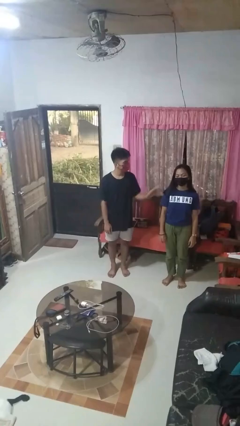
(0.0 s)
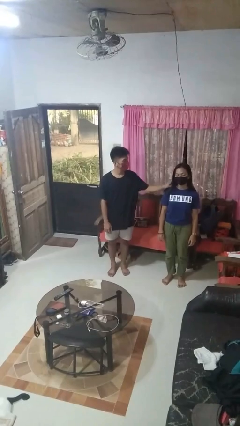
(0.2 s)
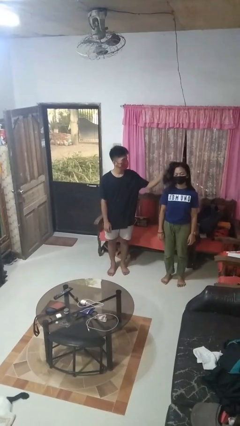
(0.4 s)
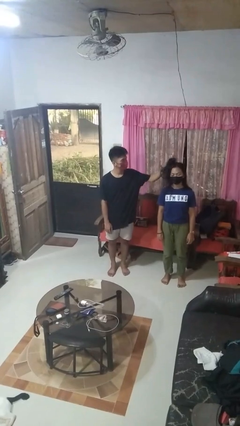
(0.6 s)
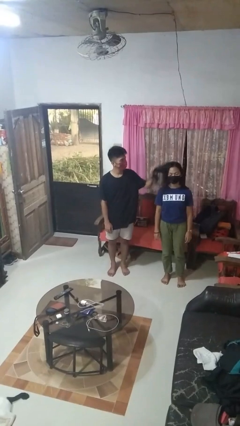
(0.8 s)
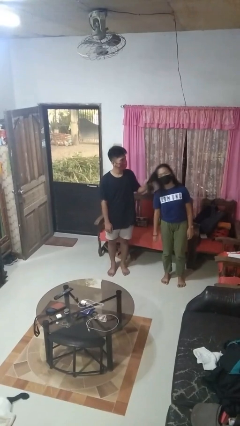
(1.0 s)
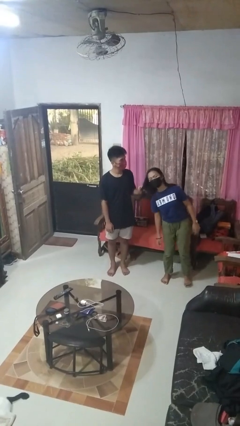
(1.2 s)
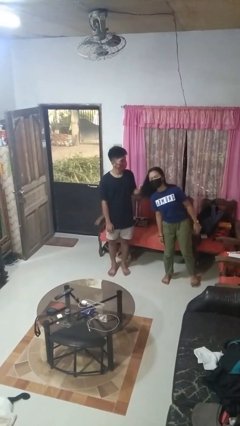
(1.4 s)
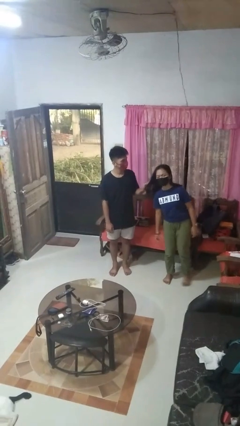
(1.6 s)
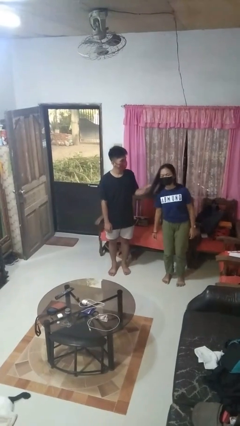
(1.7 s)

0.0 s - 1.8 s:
person grabs person by hair

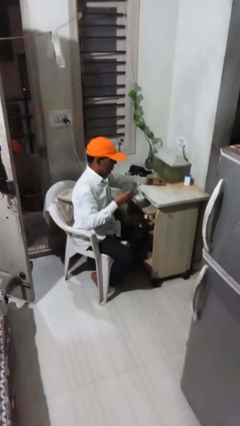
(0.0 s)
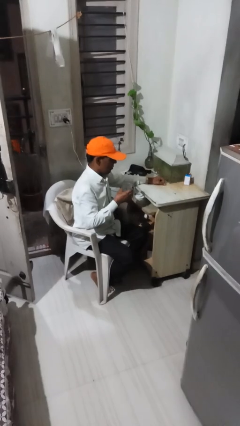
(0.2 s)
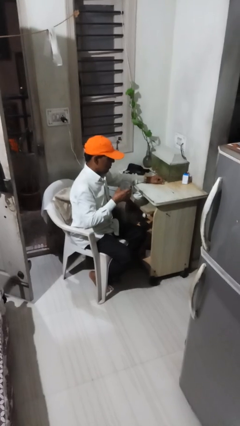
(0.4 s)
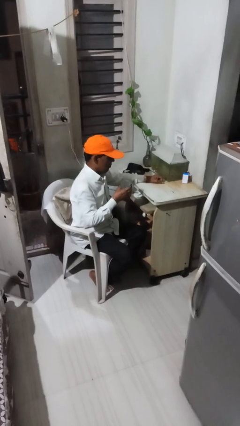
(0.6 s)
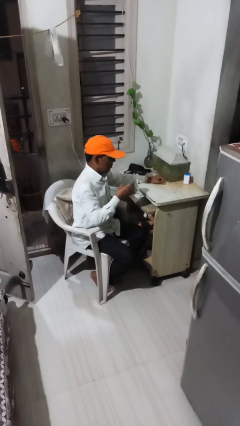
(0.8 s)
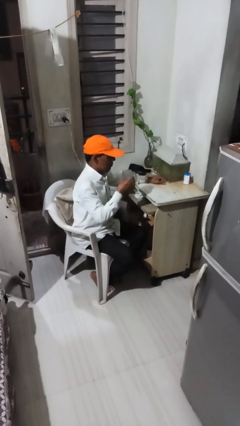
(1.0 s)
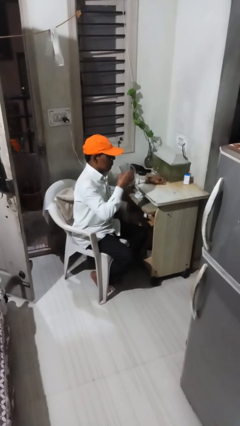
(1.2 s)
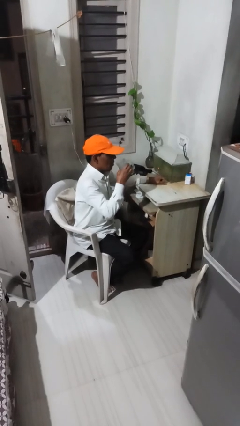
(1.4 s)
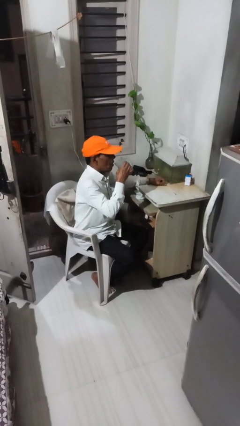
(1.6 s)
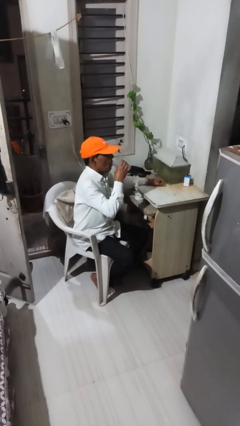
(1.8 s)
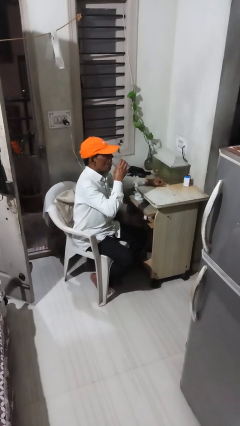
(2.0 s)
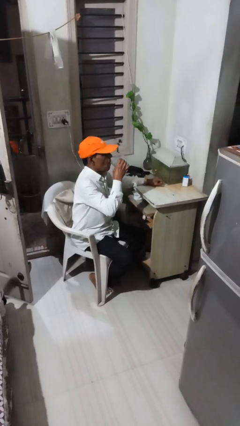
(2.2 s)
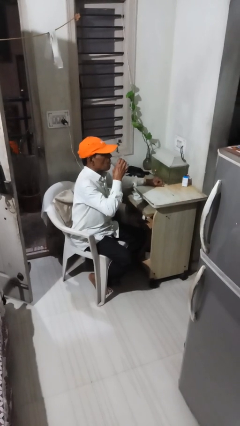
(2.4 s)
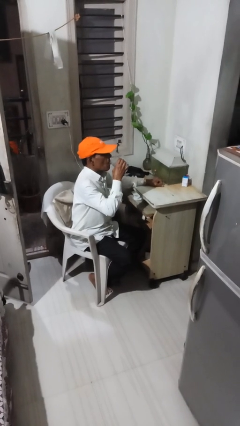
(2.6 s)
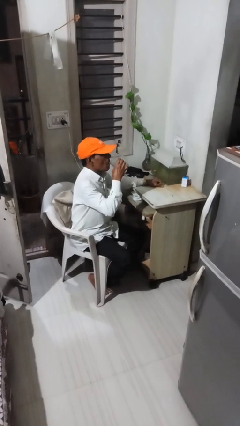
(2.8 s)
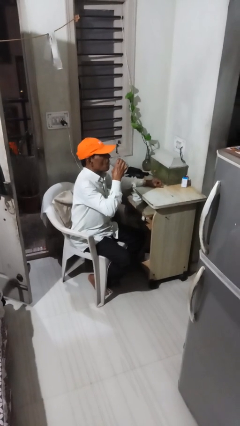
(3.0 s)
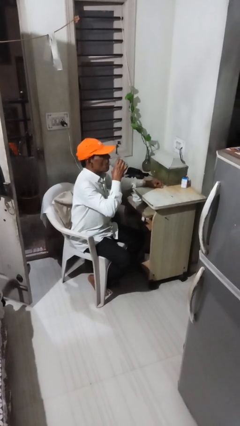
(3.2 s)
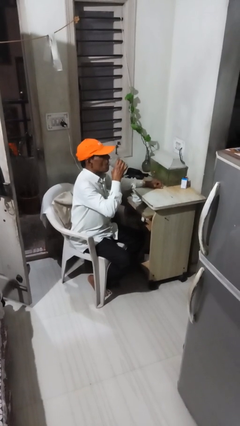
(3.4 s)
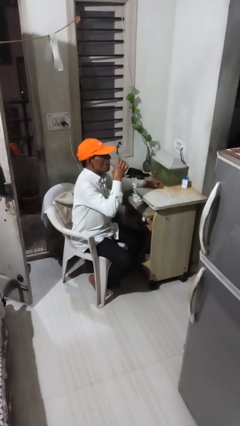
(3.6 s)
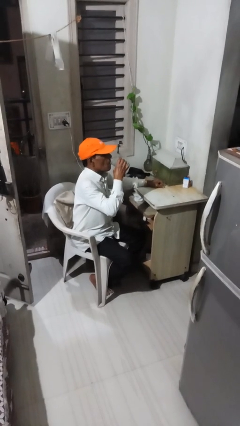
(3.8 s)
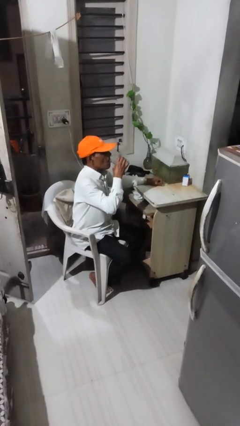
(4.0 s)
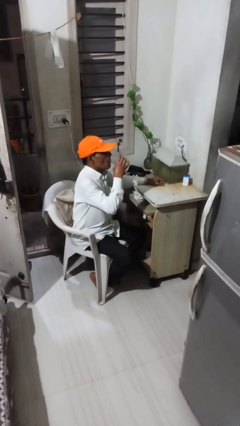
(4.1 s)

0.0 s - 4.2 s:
person drinks from mug

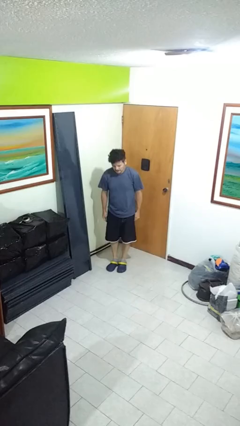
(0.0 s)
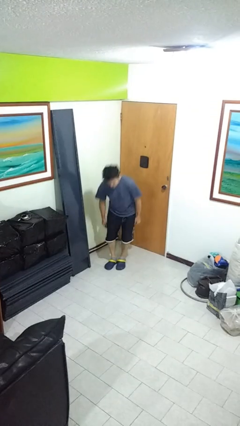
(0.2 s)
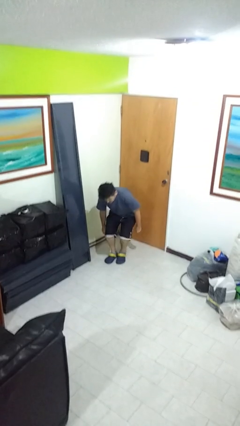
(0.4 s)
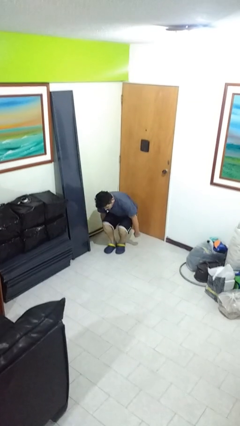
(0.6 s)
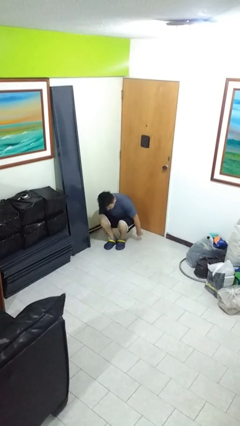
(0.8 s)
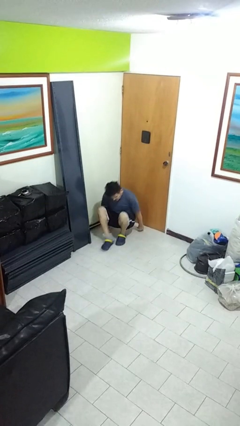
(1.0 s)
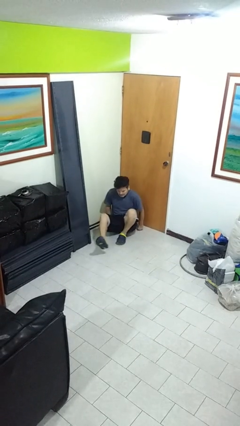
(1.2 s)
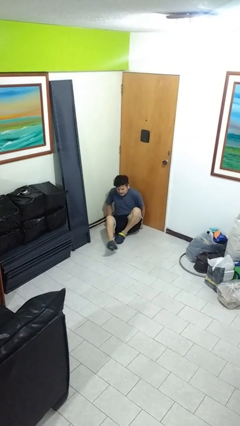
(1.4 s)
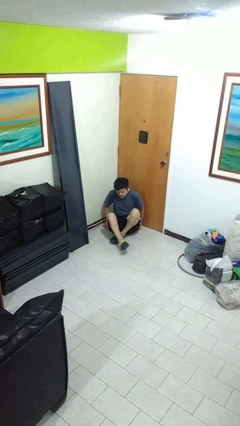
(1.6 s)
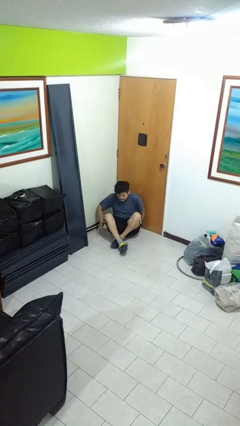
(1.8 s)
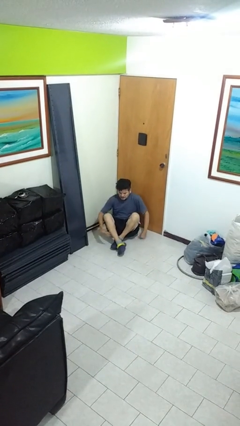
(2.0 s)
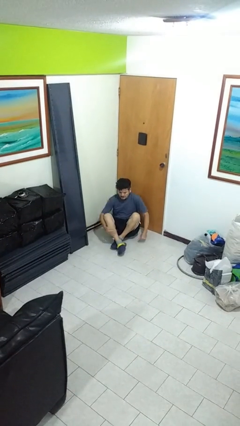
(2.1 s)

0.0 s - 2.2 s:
person sits crisscross

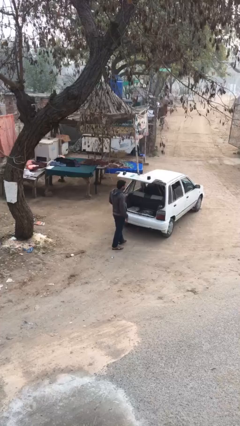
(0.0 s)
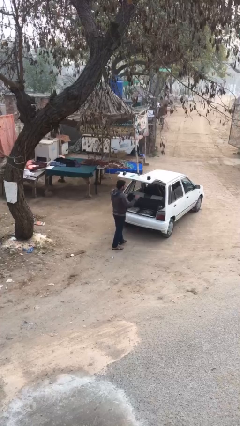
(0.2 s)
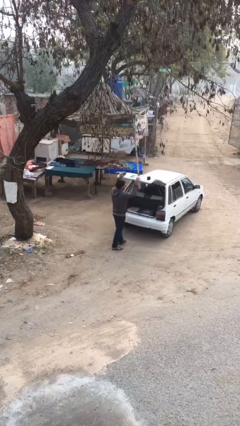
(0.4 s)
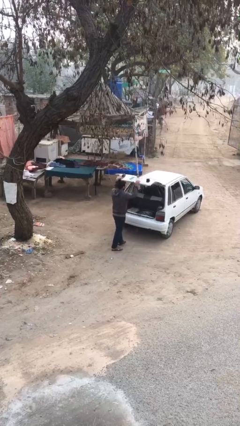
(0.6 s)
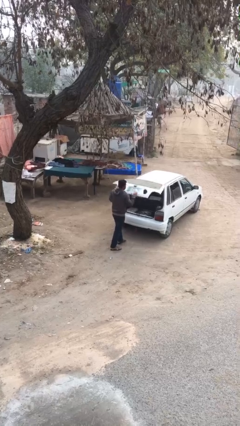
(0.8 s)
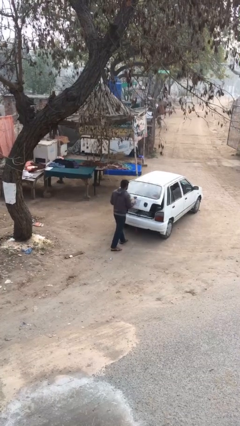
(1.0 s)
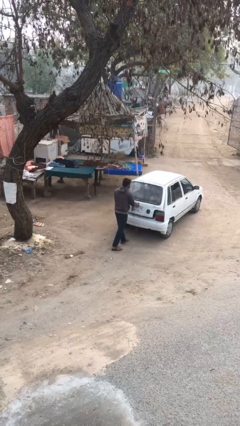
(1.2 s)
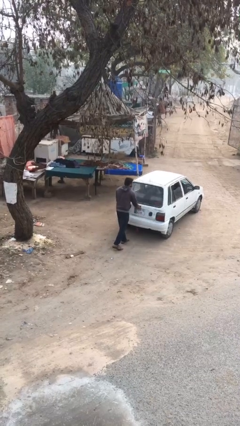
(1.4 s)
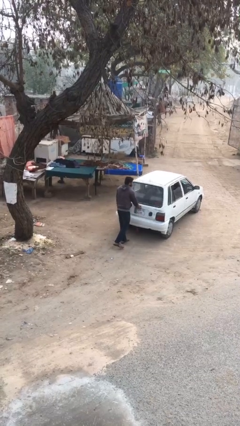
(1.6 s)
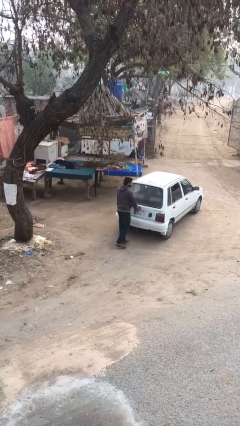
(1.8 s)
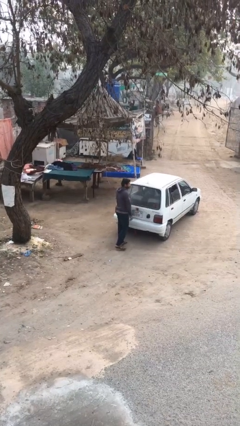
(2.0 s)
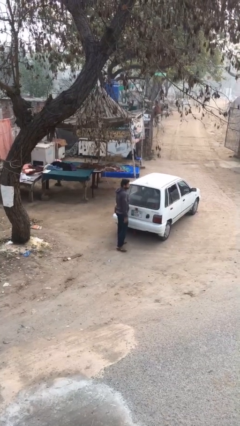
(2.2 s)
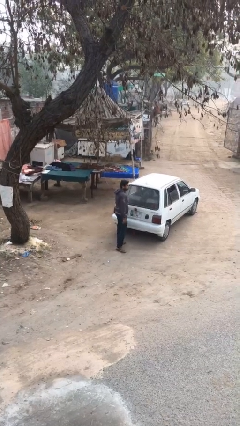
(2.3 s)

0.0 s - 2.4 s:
person closes car trunk

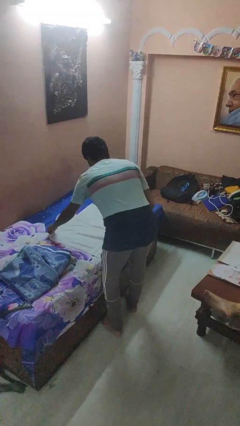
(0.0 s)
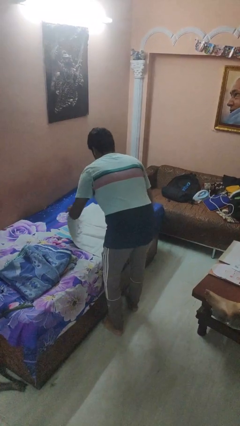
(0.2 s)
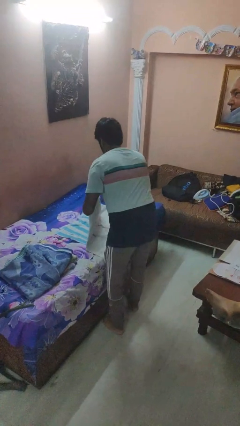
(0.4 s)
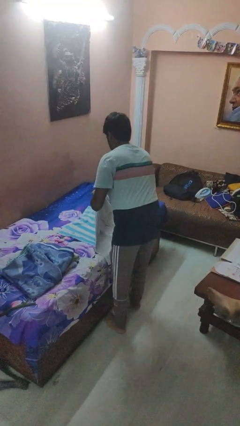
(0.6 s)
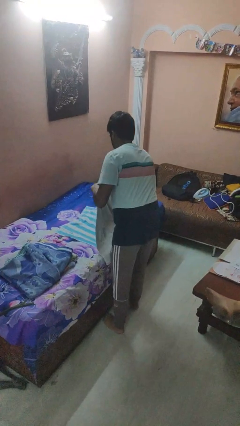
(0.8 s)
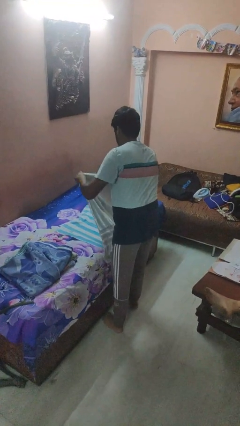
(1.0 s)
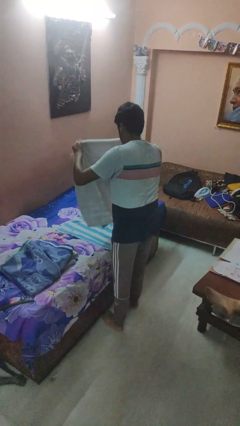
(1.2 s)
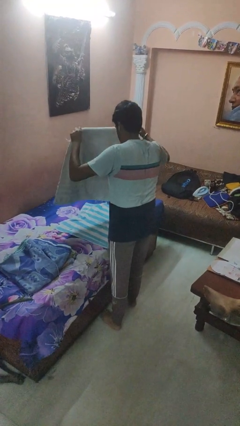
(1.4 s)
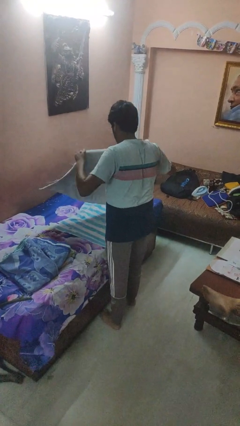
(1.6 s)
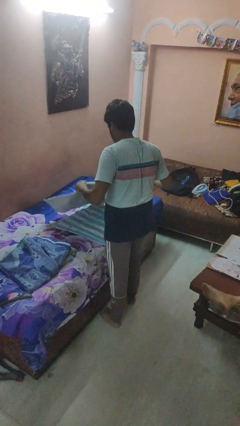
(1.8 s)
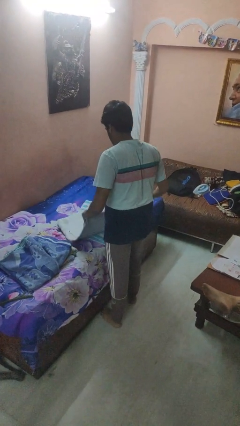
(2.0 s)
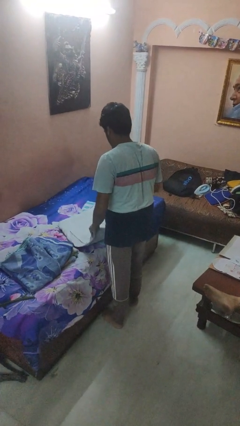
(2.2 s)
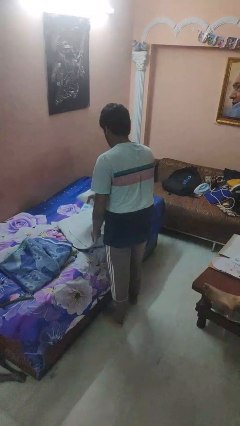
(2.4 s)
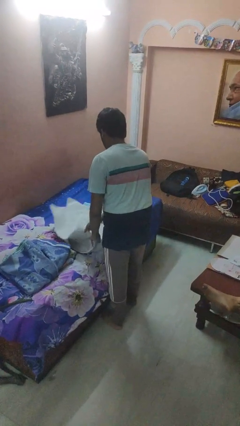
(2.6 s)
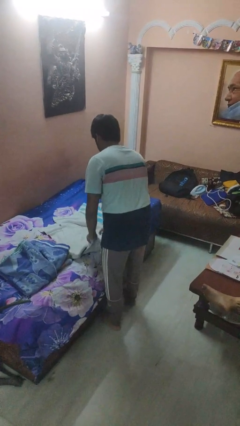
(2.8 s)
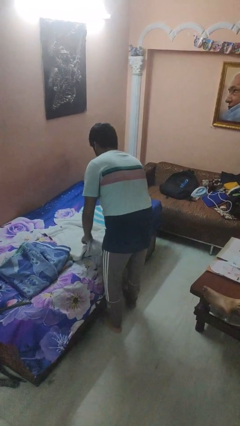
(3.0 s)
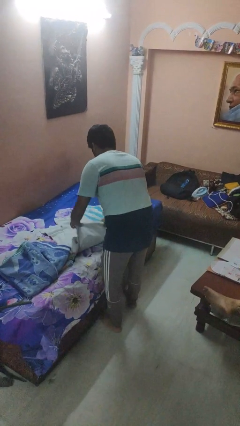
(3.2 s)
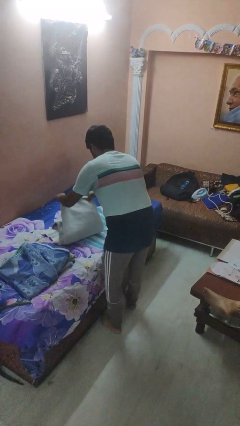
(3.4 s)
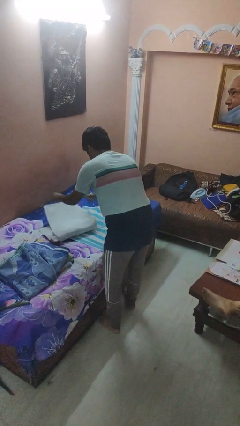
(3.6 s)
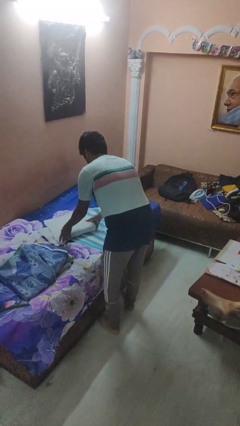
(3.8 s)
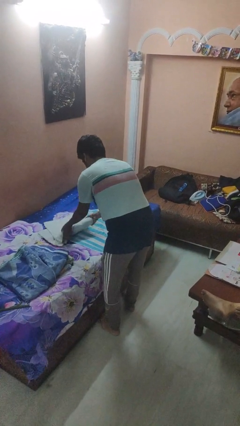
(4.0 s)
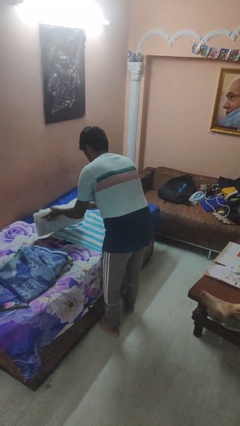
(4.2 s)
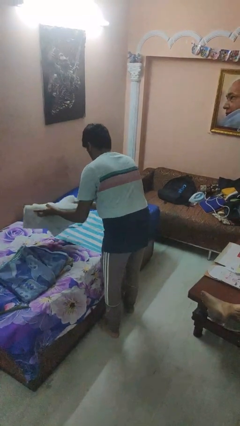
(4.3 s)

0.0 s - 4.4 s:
person folds towel

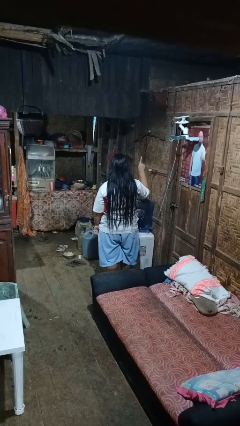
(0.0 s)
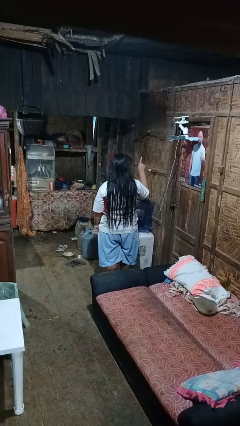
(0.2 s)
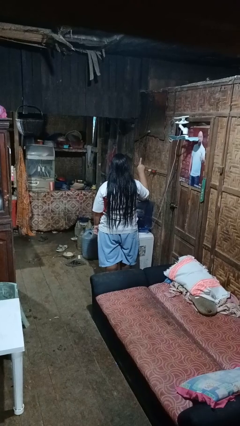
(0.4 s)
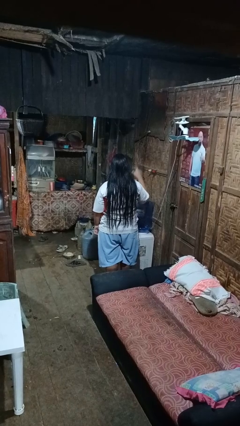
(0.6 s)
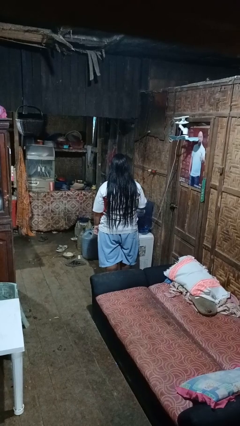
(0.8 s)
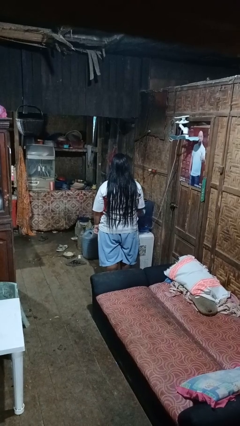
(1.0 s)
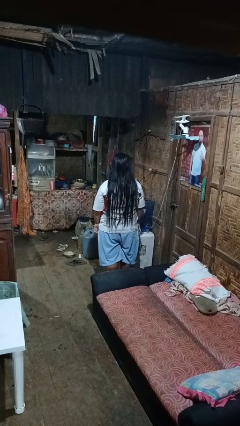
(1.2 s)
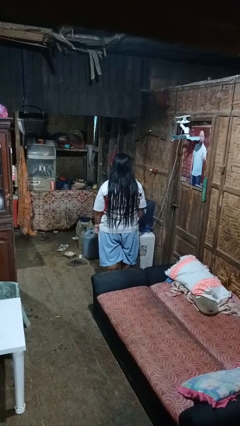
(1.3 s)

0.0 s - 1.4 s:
person gestures number one

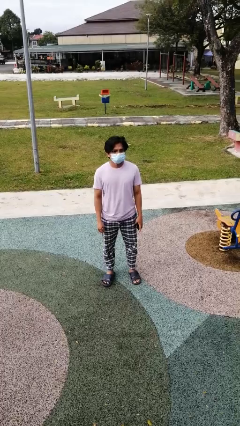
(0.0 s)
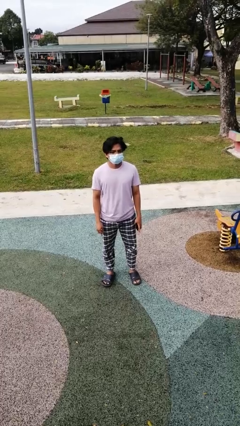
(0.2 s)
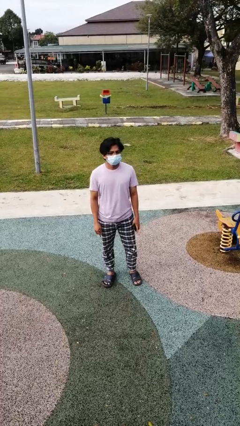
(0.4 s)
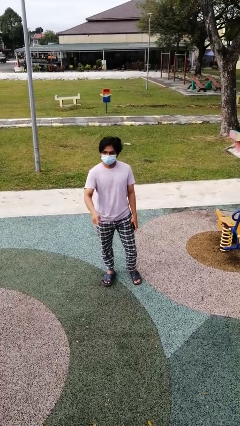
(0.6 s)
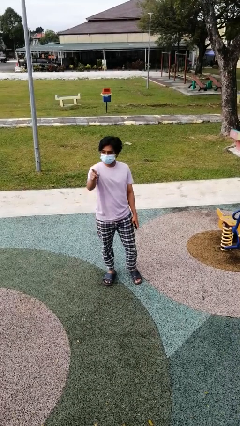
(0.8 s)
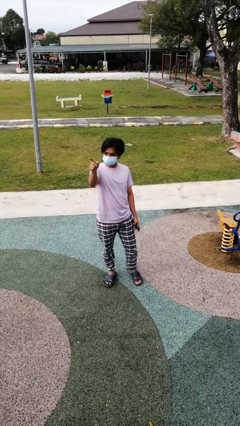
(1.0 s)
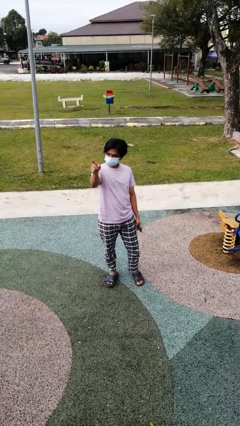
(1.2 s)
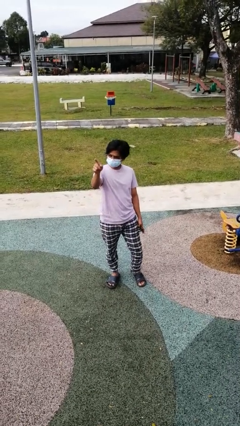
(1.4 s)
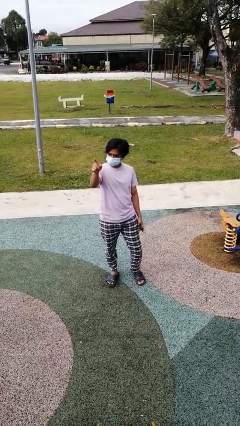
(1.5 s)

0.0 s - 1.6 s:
person points at person
